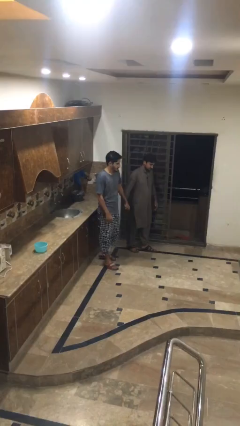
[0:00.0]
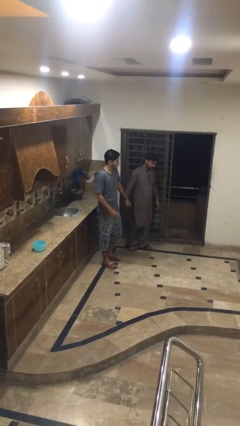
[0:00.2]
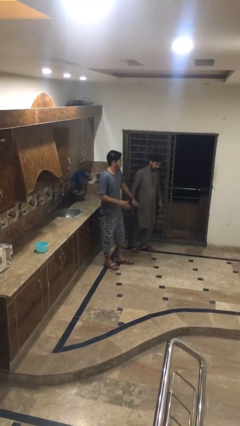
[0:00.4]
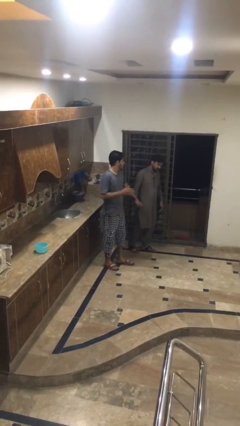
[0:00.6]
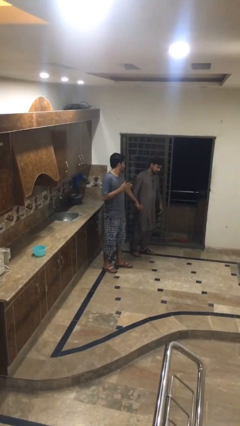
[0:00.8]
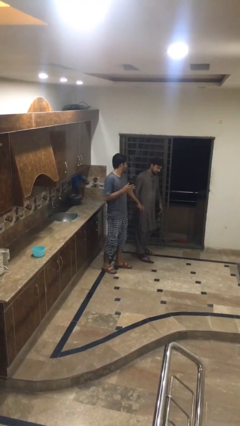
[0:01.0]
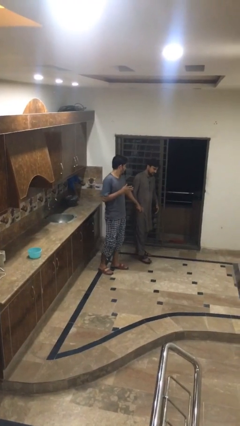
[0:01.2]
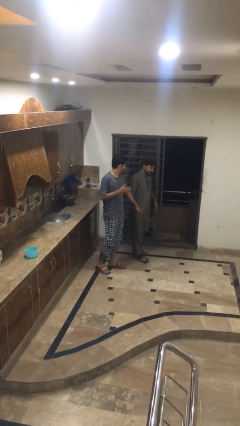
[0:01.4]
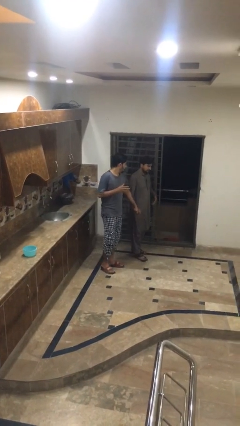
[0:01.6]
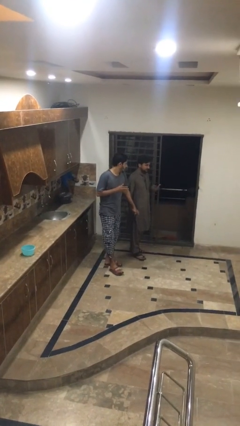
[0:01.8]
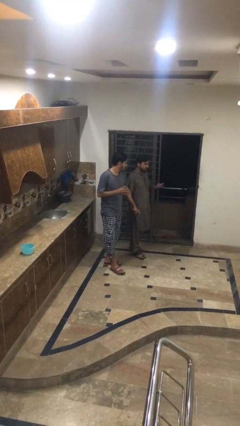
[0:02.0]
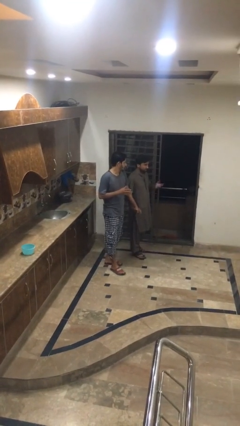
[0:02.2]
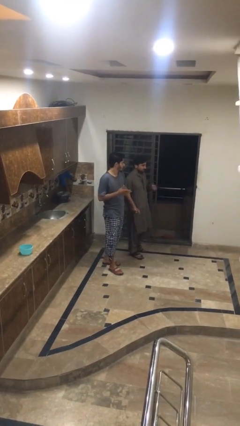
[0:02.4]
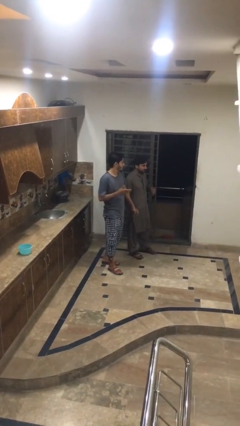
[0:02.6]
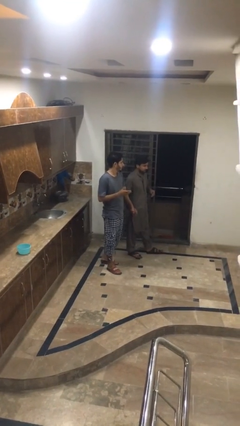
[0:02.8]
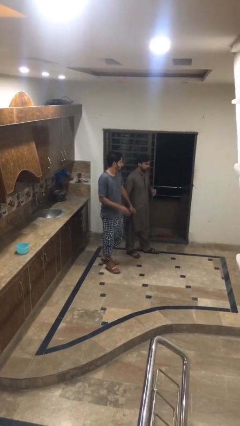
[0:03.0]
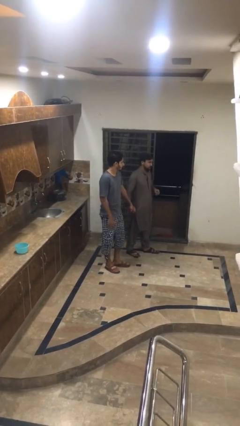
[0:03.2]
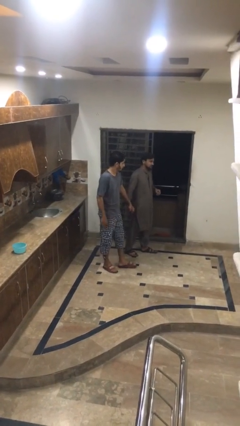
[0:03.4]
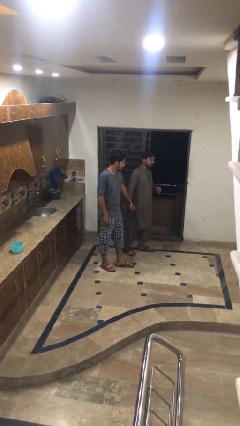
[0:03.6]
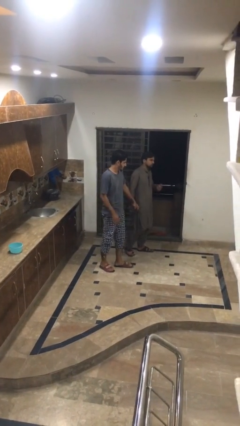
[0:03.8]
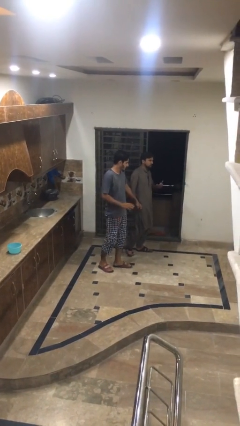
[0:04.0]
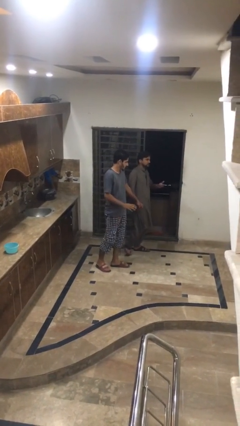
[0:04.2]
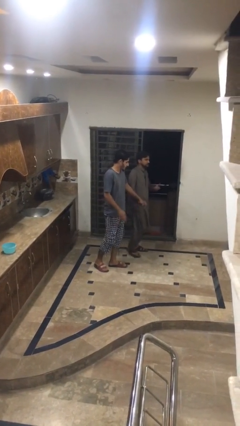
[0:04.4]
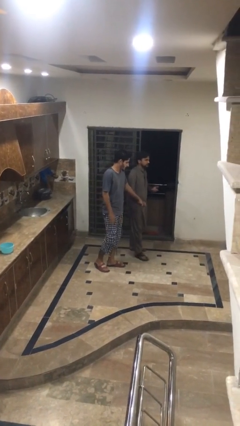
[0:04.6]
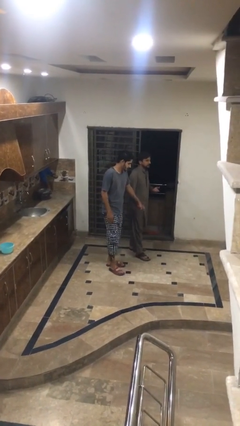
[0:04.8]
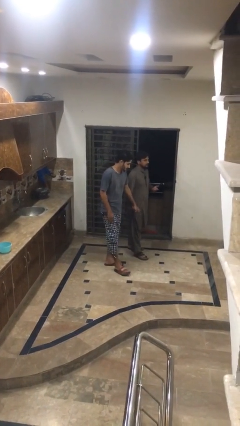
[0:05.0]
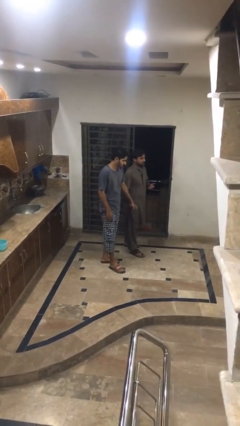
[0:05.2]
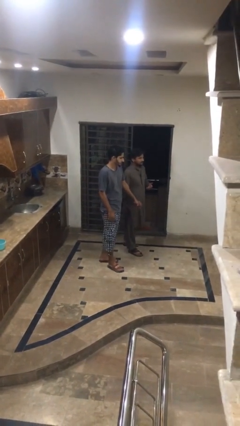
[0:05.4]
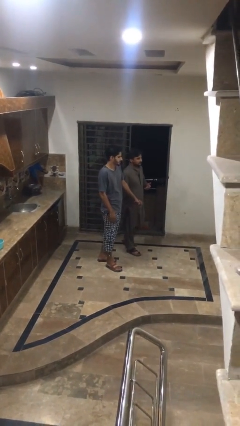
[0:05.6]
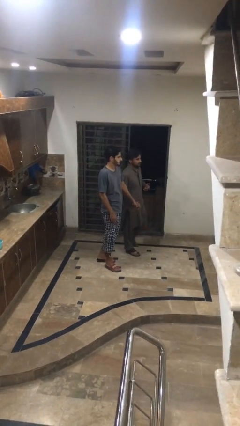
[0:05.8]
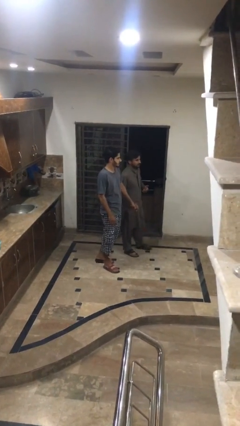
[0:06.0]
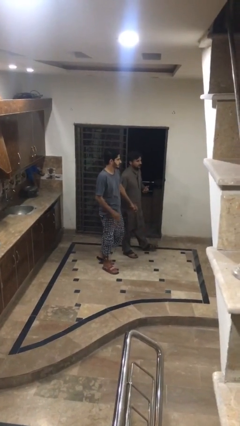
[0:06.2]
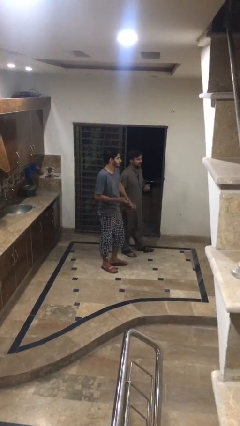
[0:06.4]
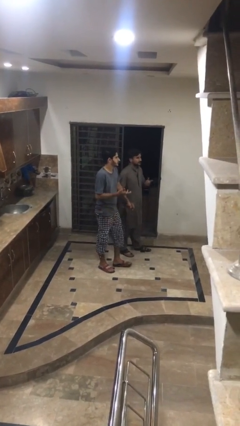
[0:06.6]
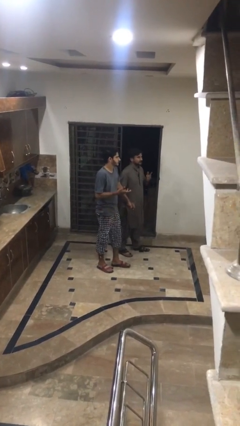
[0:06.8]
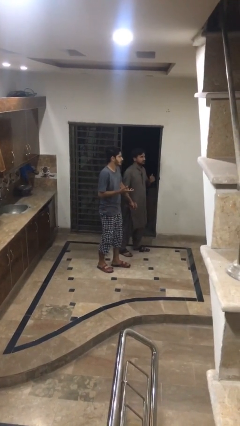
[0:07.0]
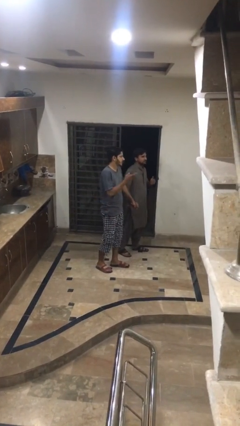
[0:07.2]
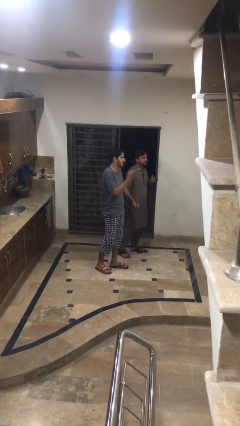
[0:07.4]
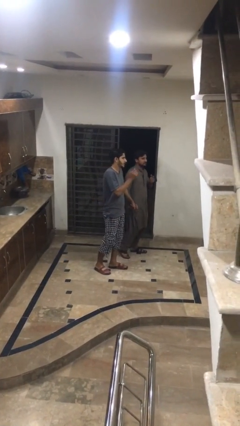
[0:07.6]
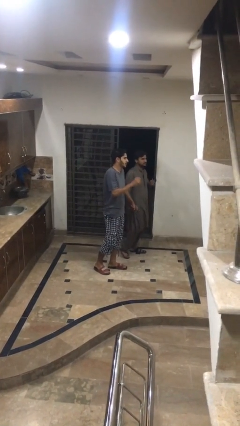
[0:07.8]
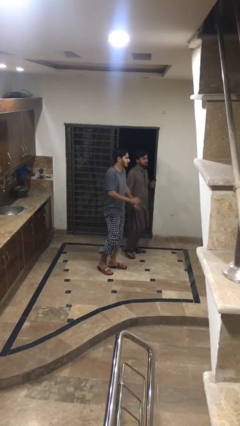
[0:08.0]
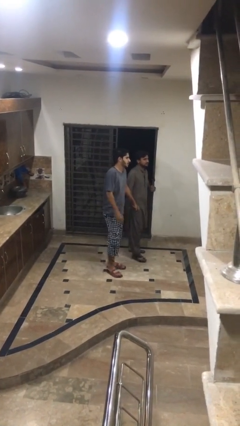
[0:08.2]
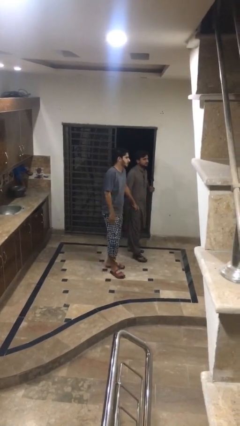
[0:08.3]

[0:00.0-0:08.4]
person holds hand

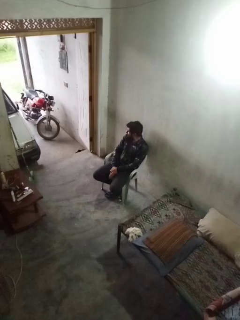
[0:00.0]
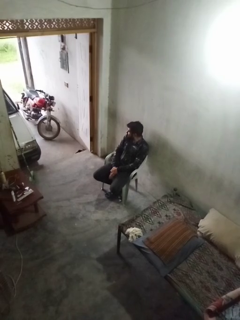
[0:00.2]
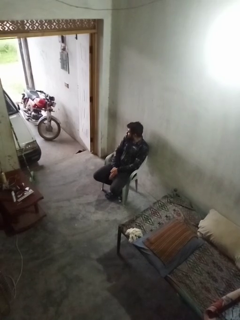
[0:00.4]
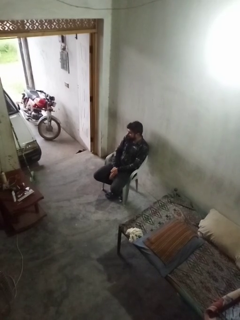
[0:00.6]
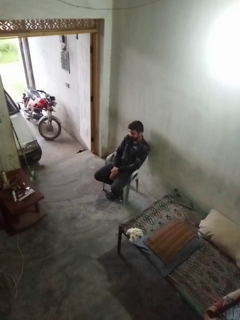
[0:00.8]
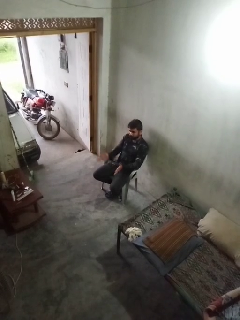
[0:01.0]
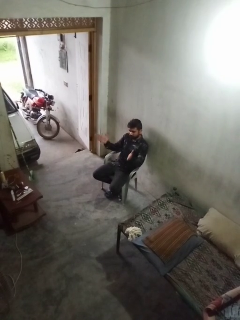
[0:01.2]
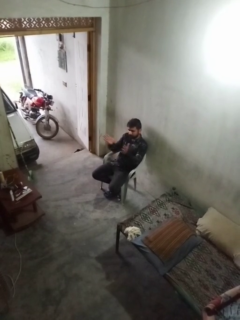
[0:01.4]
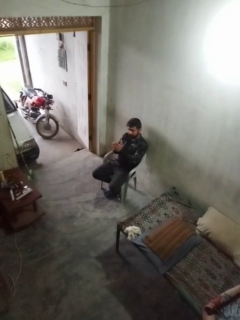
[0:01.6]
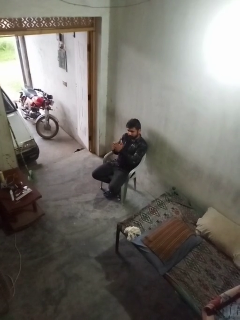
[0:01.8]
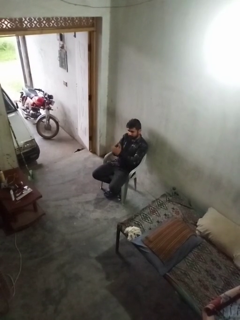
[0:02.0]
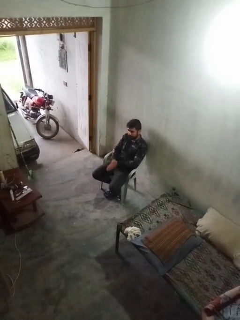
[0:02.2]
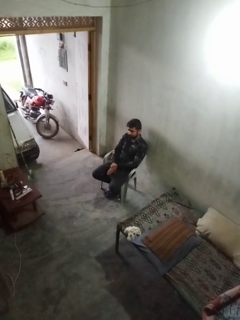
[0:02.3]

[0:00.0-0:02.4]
person claps hands

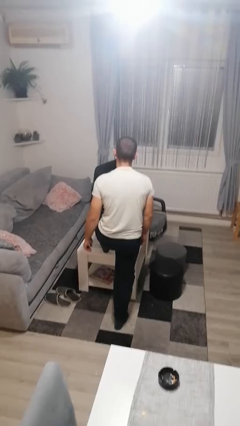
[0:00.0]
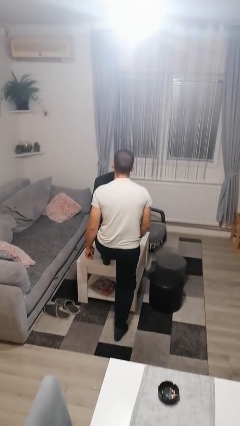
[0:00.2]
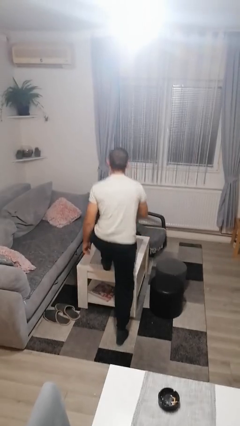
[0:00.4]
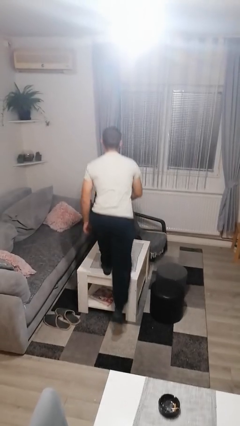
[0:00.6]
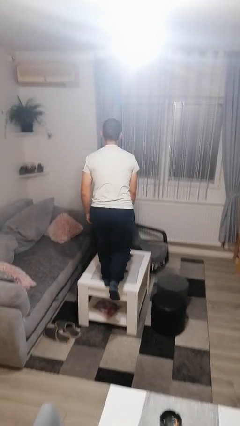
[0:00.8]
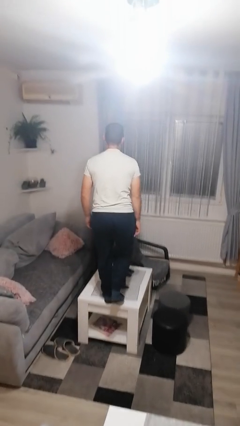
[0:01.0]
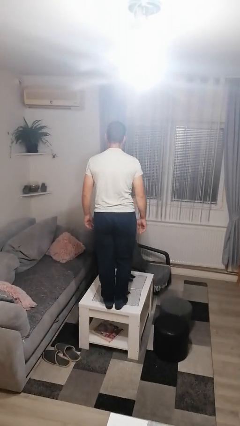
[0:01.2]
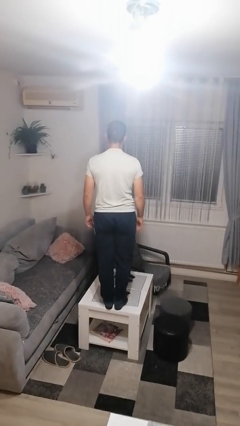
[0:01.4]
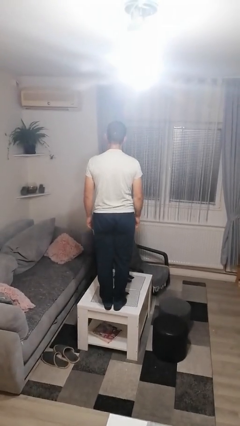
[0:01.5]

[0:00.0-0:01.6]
person climbs on table

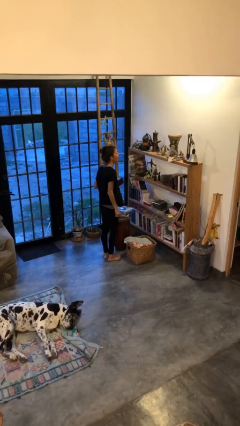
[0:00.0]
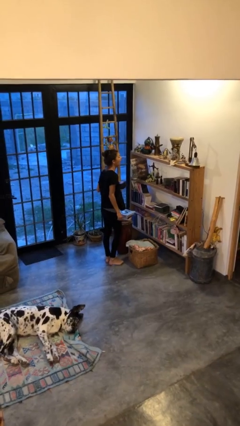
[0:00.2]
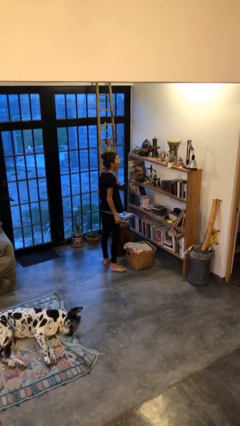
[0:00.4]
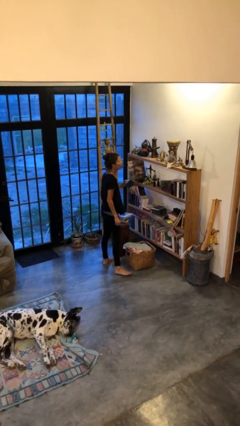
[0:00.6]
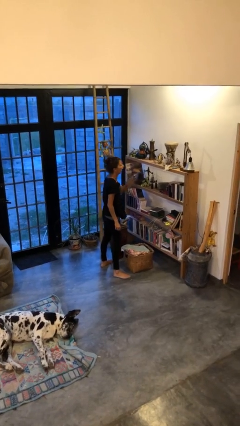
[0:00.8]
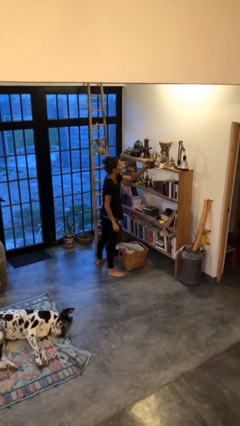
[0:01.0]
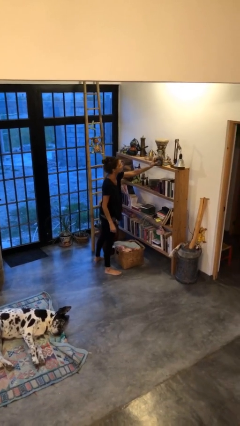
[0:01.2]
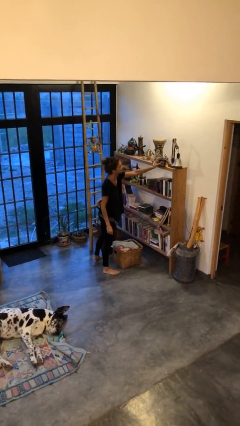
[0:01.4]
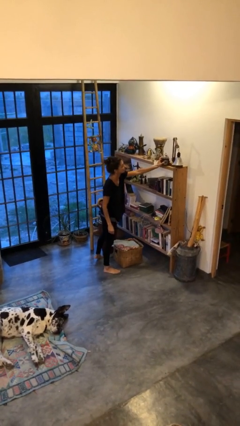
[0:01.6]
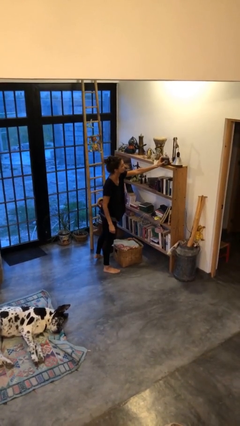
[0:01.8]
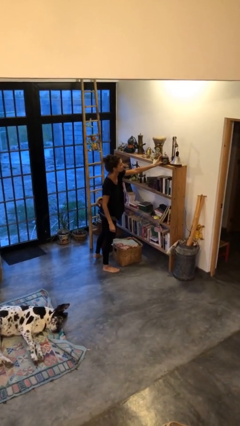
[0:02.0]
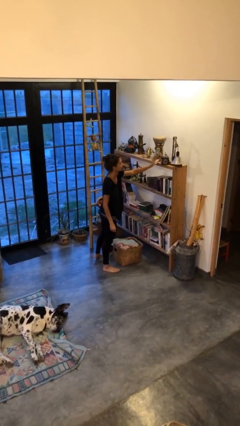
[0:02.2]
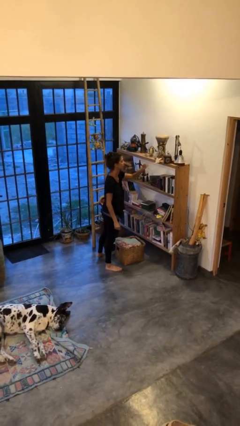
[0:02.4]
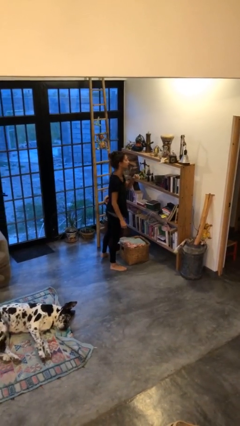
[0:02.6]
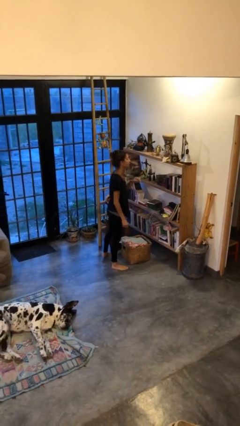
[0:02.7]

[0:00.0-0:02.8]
person puts down object on countertop

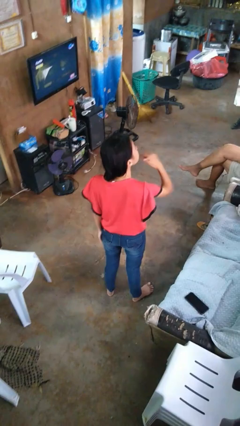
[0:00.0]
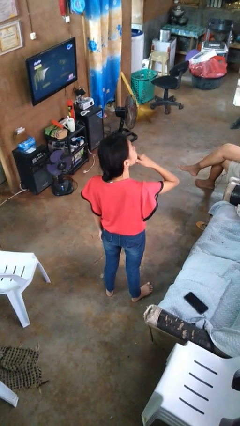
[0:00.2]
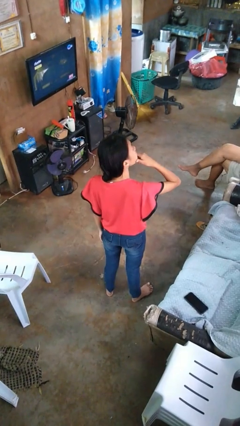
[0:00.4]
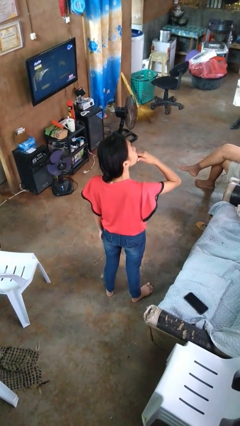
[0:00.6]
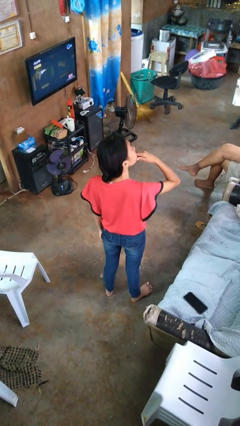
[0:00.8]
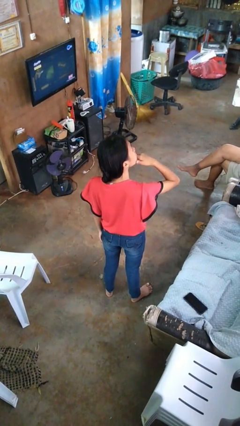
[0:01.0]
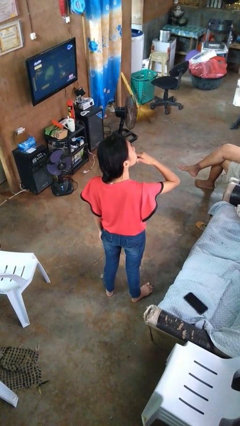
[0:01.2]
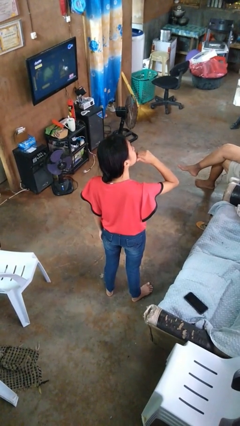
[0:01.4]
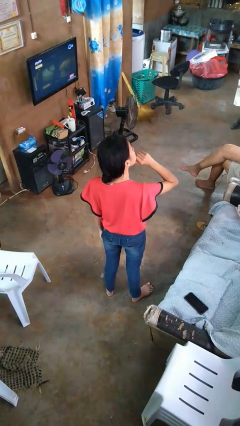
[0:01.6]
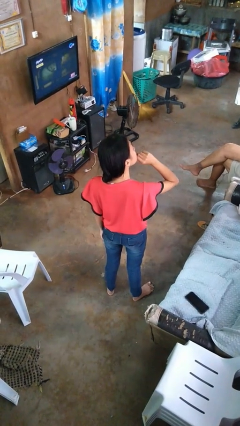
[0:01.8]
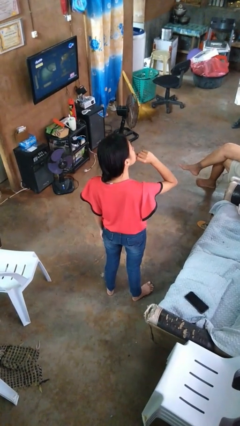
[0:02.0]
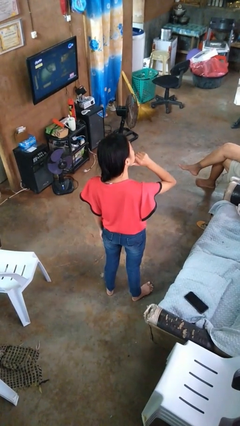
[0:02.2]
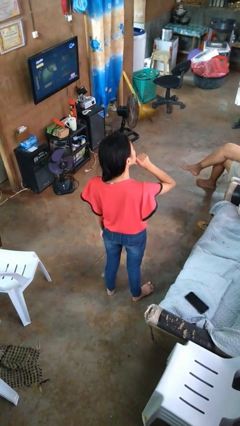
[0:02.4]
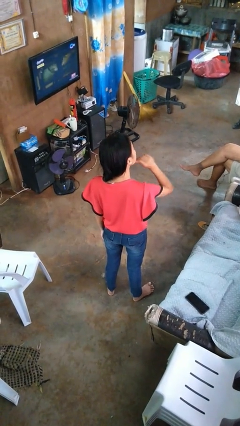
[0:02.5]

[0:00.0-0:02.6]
person strokes chin

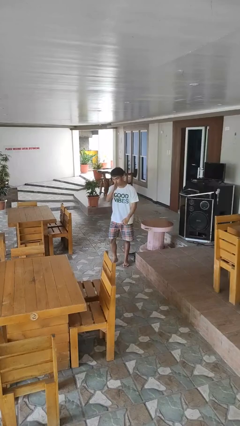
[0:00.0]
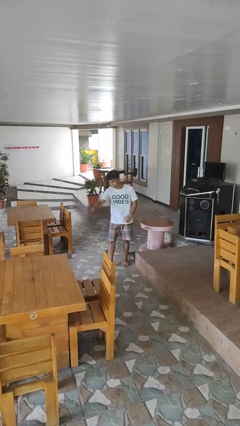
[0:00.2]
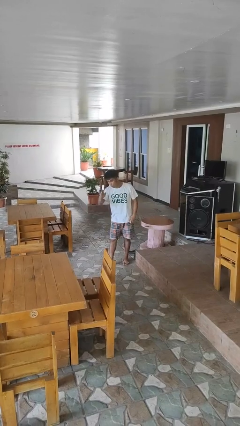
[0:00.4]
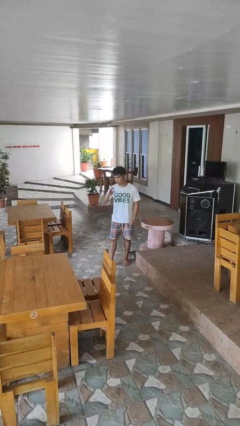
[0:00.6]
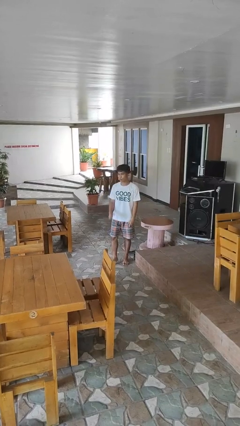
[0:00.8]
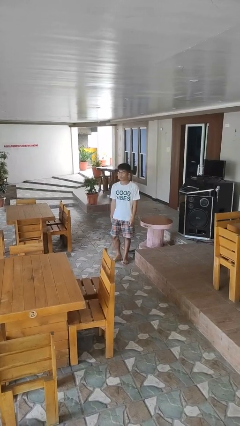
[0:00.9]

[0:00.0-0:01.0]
person karate chop
